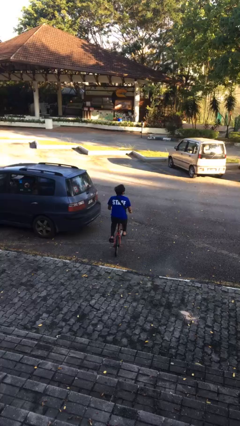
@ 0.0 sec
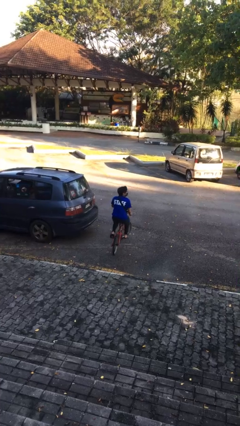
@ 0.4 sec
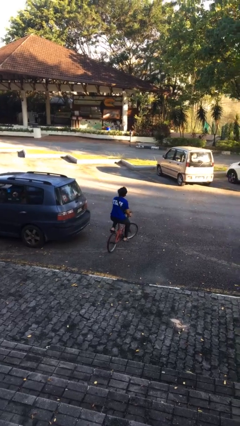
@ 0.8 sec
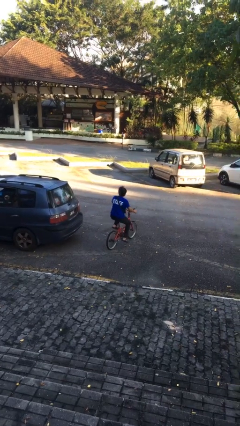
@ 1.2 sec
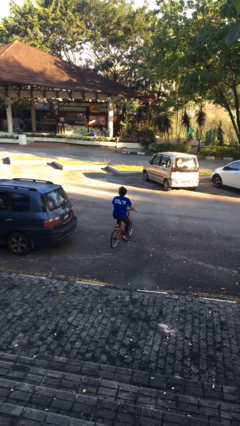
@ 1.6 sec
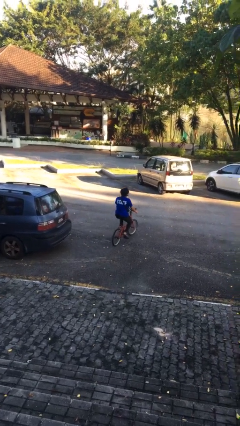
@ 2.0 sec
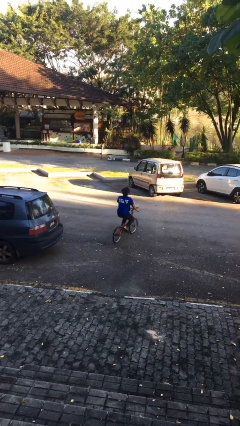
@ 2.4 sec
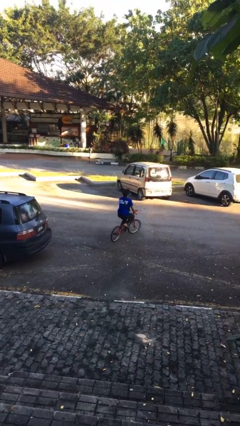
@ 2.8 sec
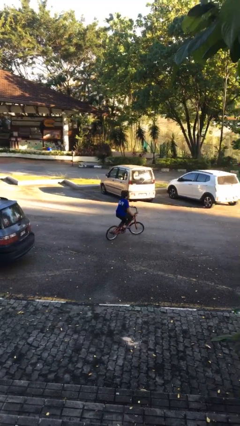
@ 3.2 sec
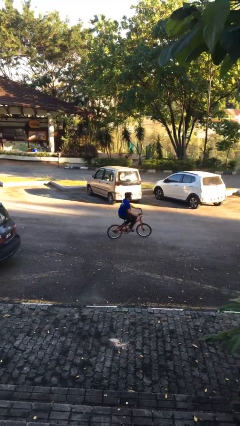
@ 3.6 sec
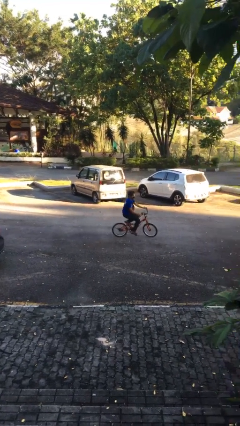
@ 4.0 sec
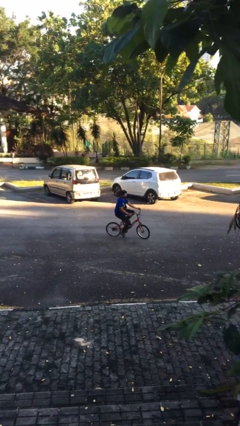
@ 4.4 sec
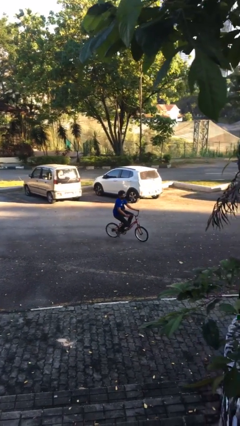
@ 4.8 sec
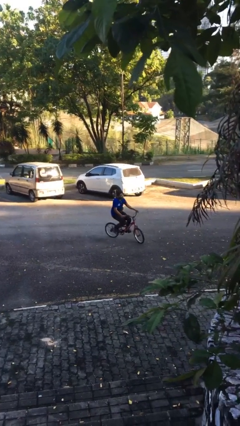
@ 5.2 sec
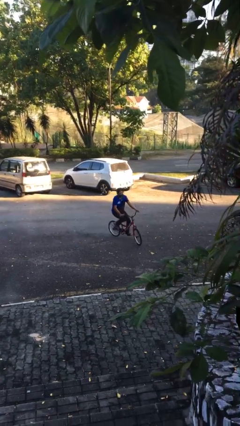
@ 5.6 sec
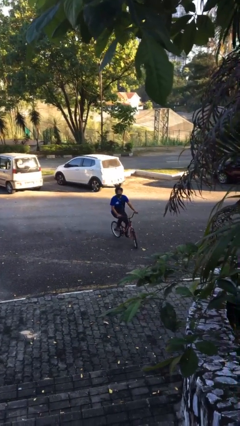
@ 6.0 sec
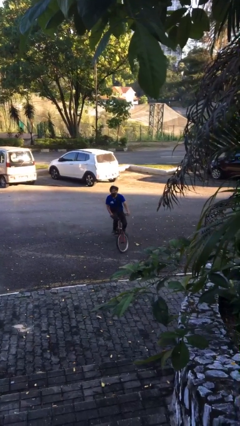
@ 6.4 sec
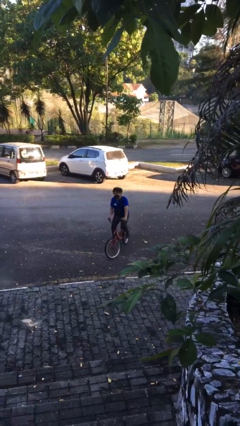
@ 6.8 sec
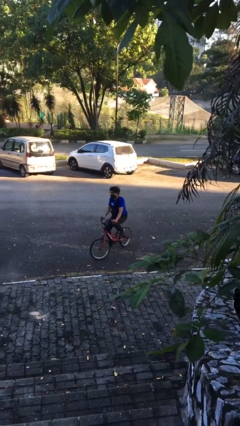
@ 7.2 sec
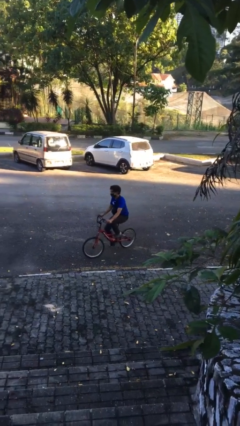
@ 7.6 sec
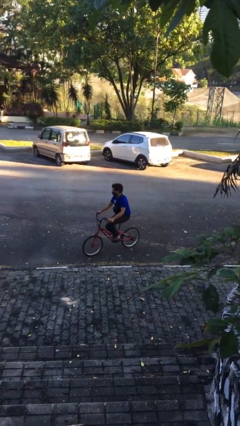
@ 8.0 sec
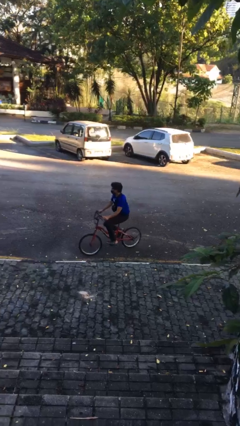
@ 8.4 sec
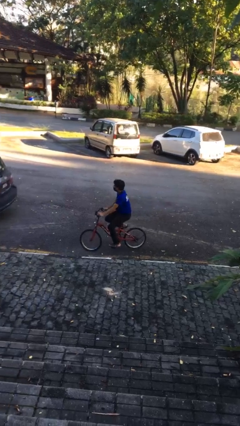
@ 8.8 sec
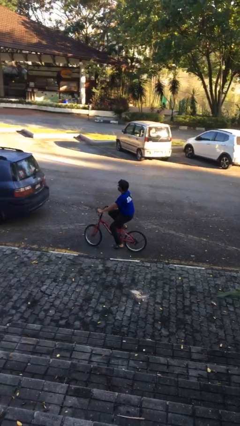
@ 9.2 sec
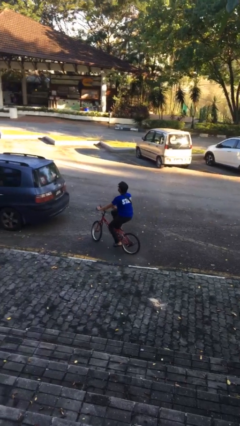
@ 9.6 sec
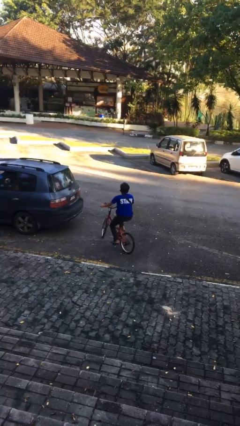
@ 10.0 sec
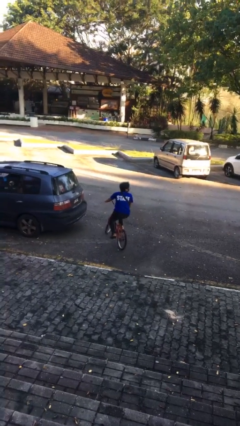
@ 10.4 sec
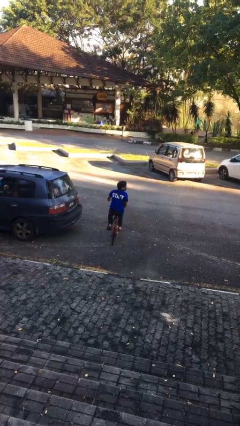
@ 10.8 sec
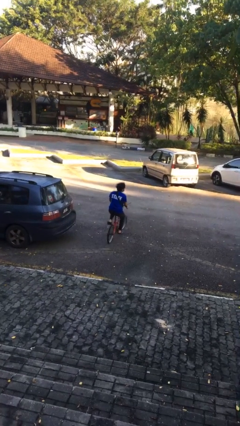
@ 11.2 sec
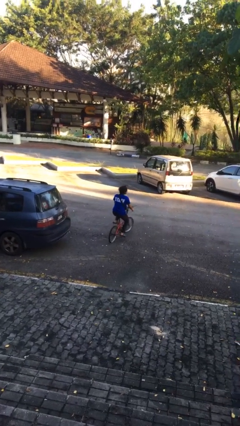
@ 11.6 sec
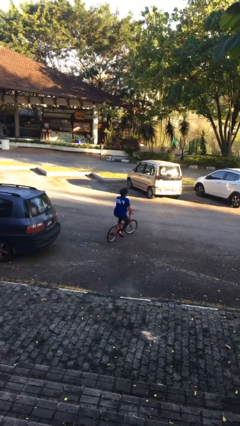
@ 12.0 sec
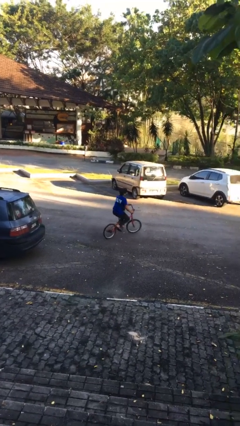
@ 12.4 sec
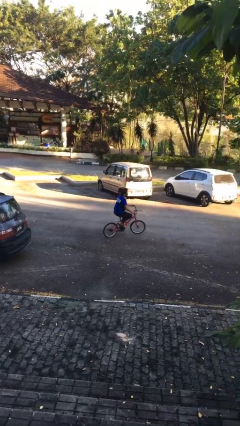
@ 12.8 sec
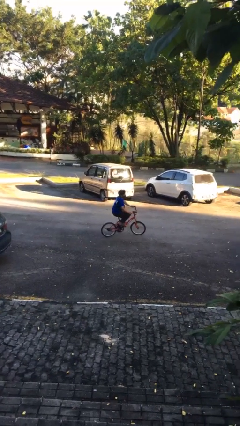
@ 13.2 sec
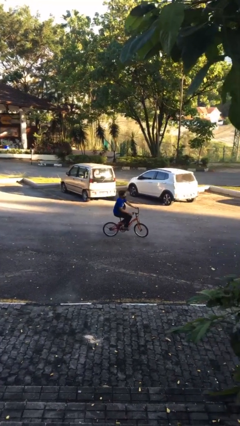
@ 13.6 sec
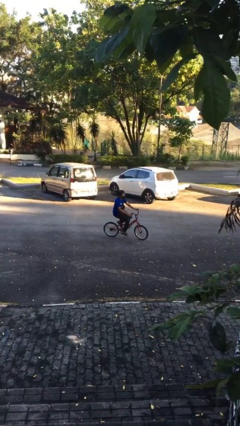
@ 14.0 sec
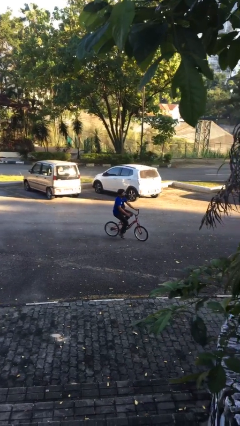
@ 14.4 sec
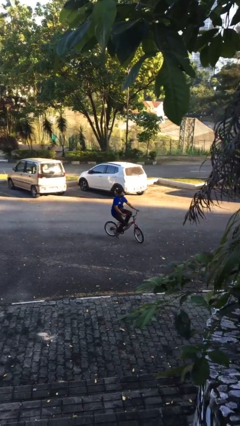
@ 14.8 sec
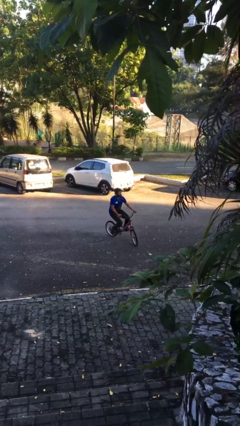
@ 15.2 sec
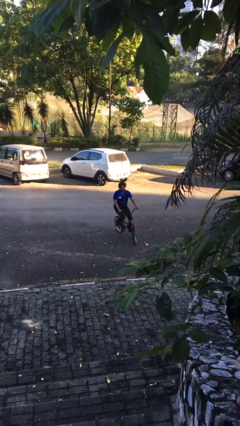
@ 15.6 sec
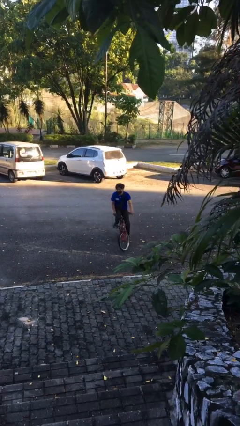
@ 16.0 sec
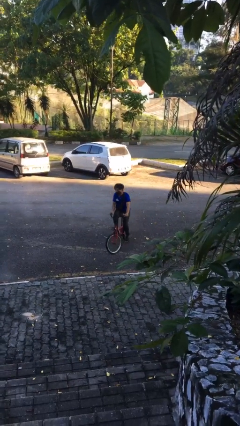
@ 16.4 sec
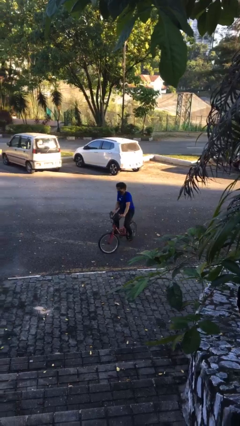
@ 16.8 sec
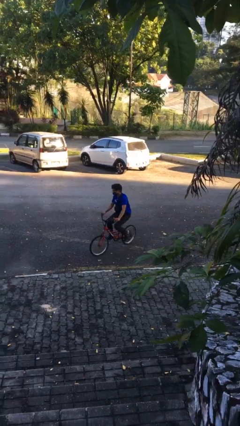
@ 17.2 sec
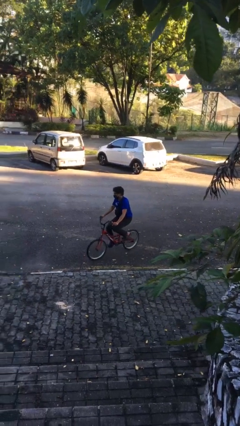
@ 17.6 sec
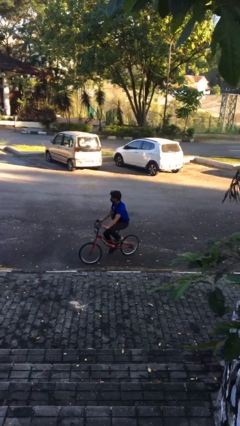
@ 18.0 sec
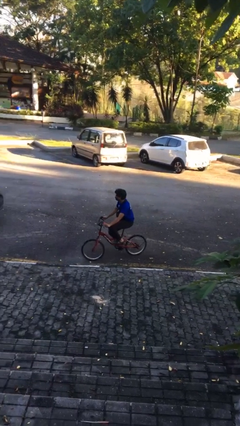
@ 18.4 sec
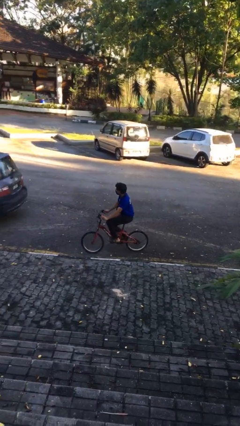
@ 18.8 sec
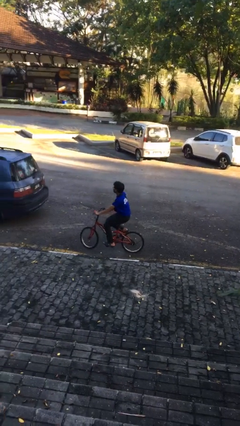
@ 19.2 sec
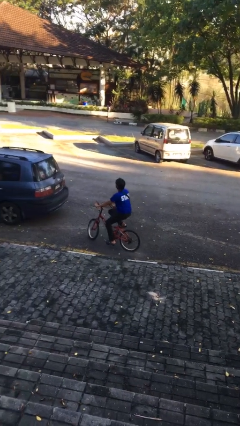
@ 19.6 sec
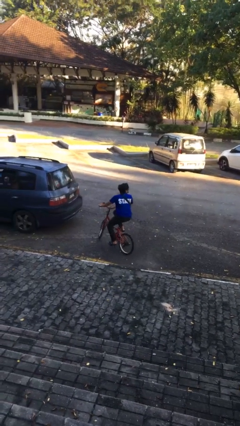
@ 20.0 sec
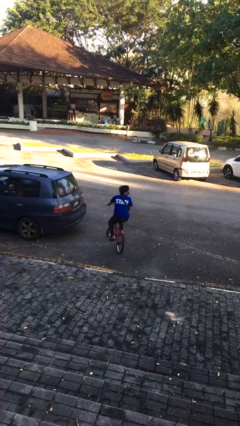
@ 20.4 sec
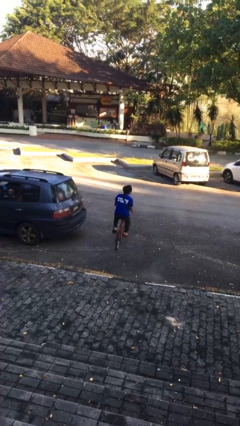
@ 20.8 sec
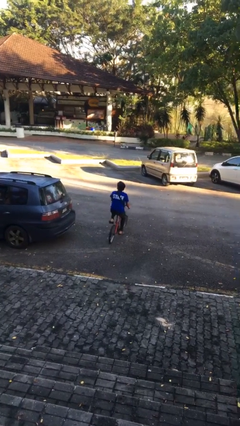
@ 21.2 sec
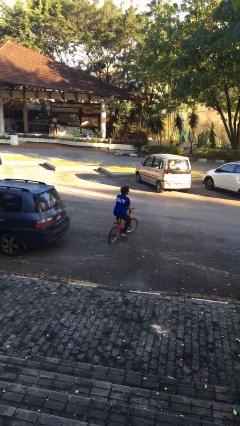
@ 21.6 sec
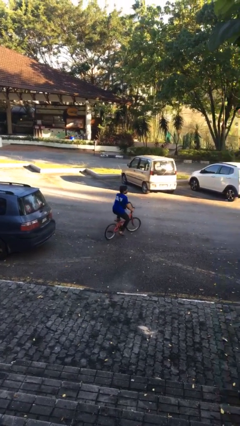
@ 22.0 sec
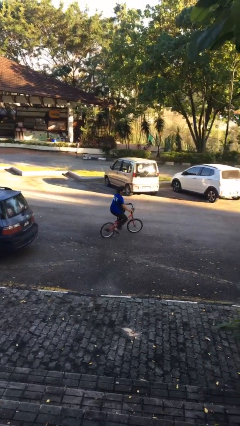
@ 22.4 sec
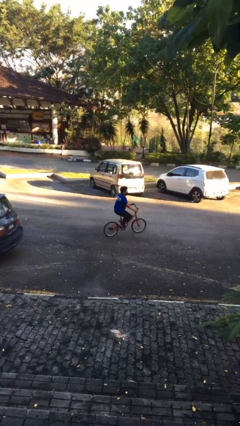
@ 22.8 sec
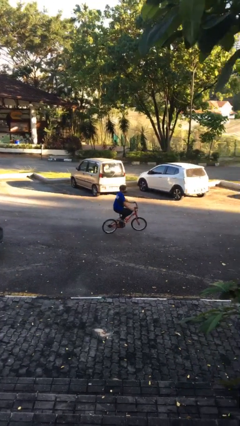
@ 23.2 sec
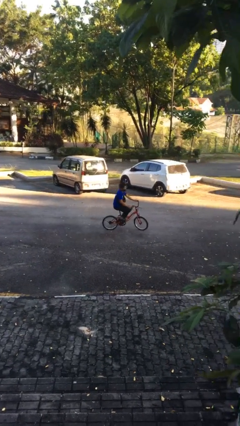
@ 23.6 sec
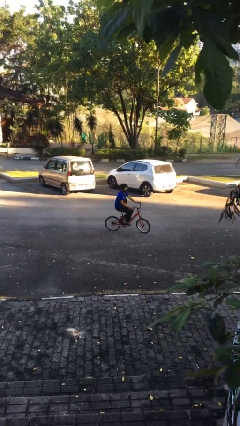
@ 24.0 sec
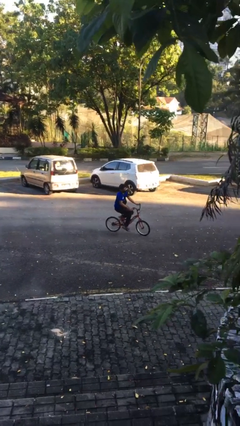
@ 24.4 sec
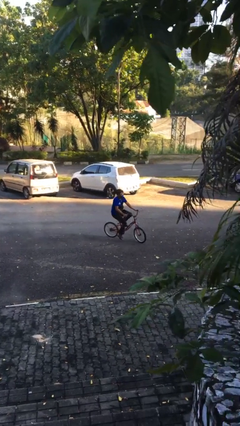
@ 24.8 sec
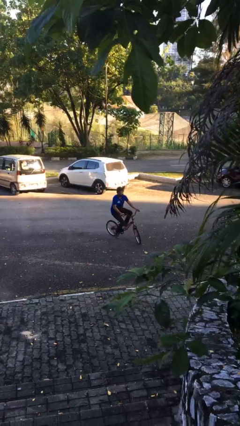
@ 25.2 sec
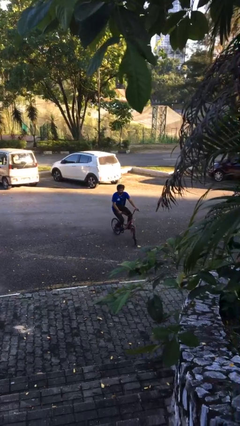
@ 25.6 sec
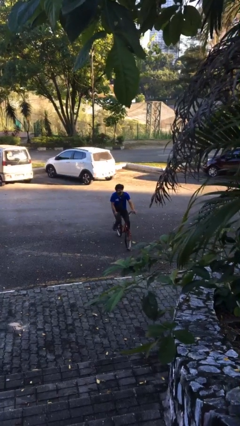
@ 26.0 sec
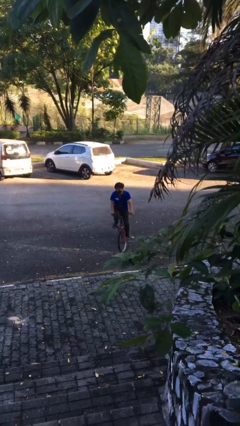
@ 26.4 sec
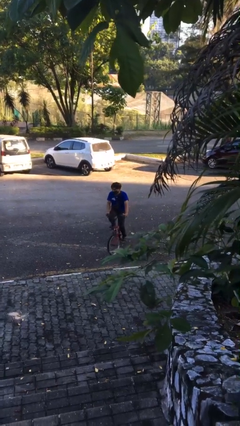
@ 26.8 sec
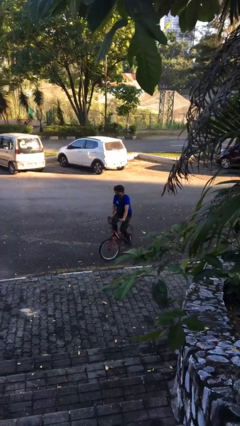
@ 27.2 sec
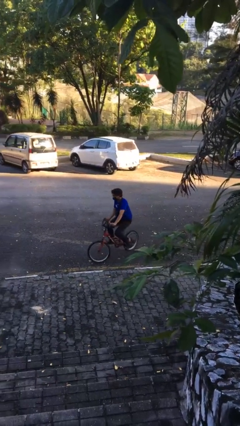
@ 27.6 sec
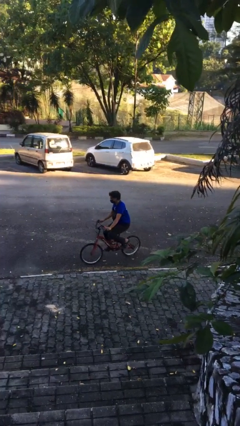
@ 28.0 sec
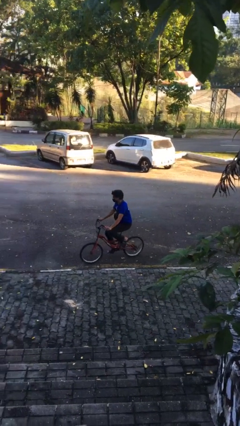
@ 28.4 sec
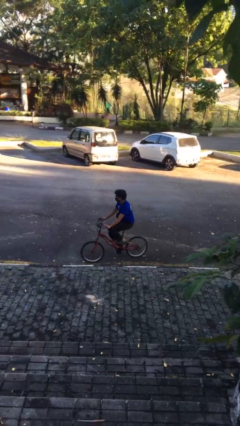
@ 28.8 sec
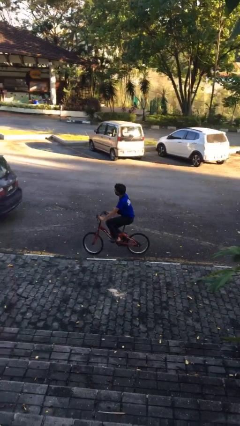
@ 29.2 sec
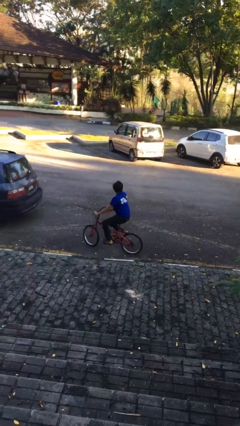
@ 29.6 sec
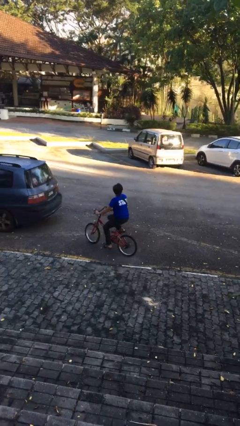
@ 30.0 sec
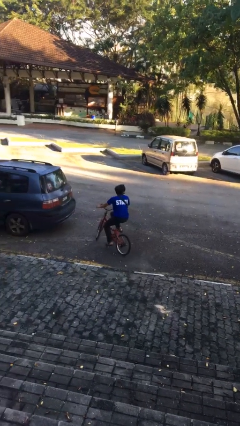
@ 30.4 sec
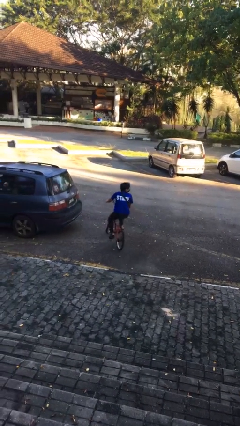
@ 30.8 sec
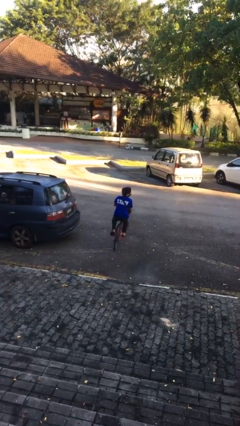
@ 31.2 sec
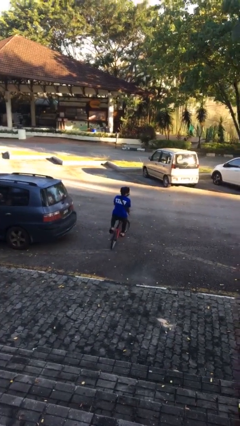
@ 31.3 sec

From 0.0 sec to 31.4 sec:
person rides bicycle

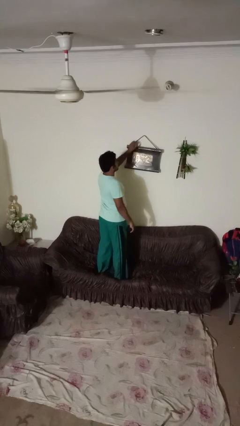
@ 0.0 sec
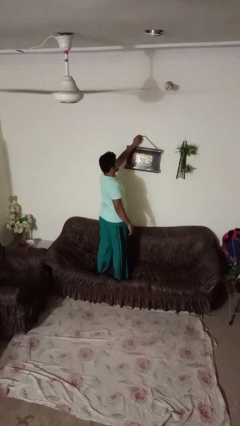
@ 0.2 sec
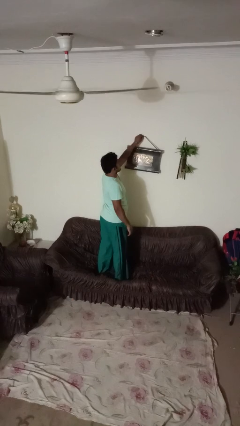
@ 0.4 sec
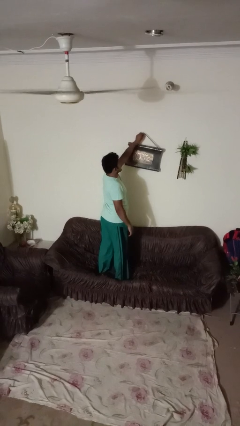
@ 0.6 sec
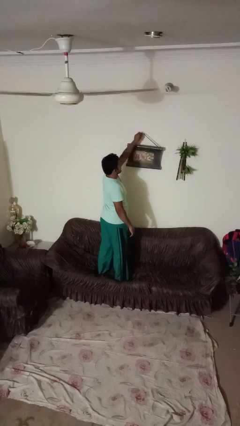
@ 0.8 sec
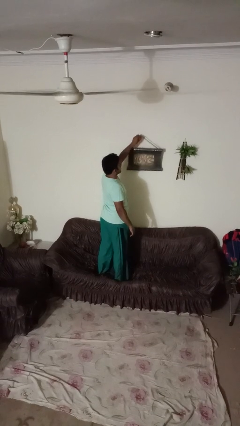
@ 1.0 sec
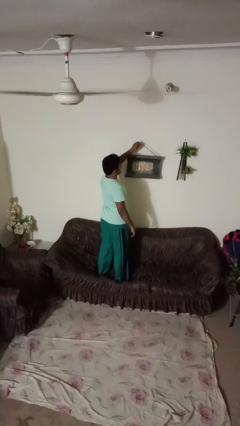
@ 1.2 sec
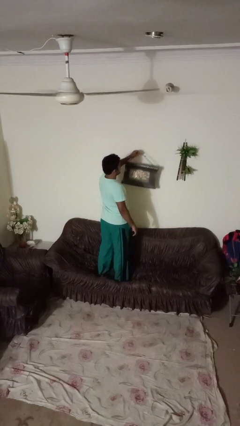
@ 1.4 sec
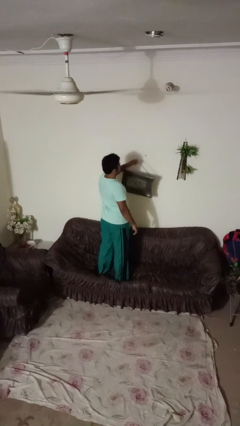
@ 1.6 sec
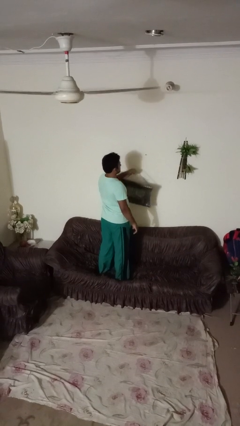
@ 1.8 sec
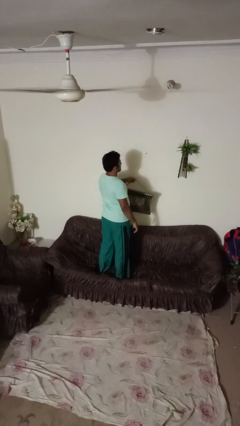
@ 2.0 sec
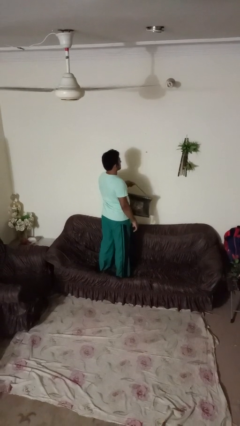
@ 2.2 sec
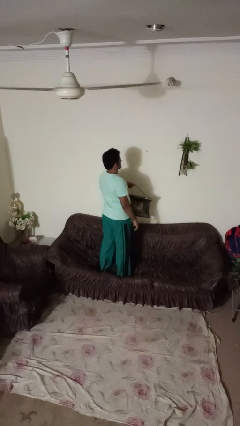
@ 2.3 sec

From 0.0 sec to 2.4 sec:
person takes down picture frame

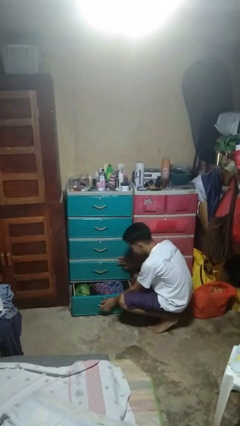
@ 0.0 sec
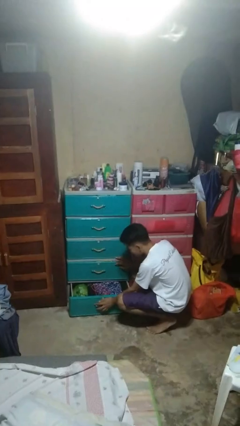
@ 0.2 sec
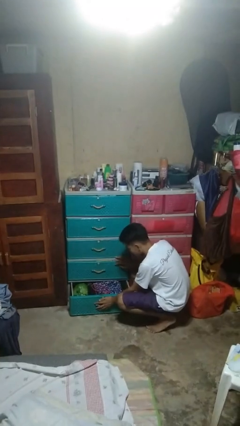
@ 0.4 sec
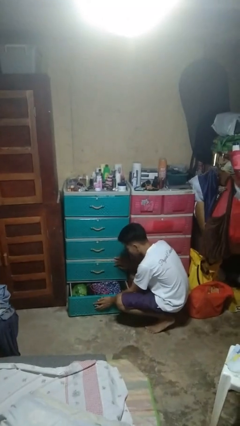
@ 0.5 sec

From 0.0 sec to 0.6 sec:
person closes dresser drawer
